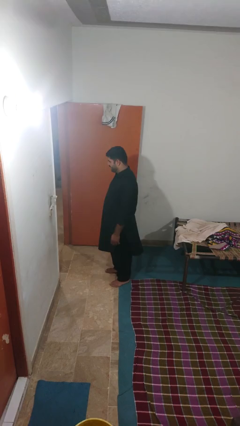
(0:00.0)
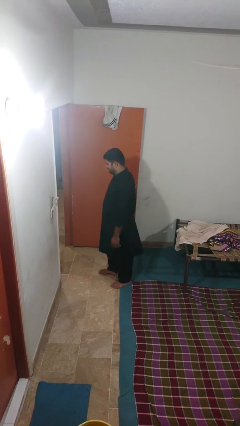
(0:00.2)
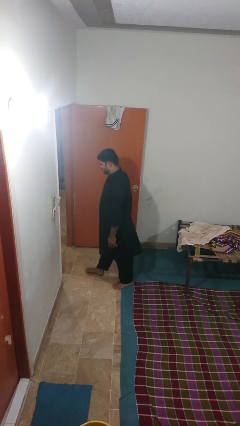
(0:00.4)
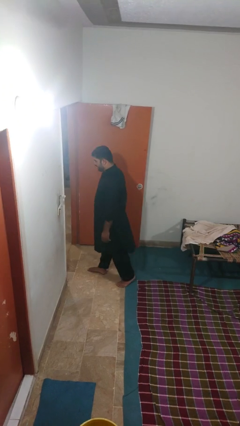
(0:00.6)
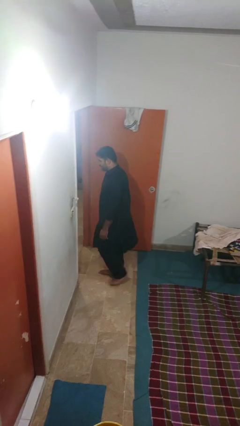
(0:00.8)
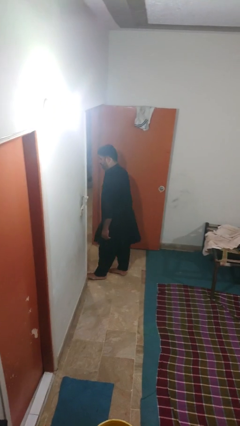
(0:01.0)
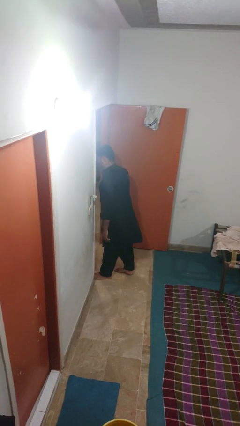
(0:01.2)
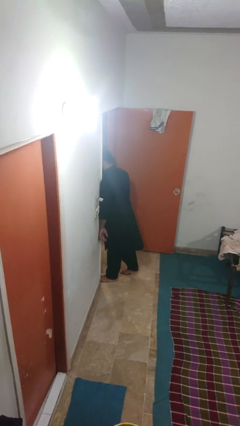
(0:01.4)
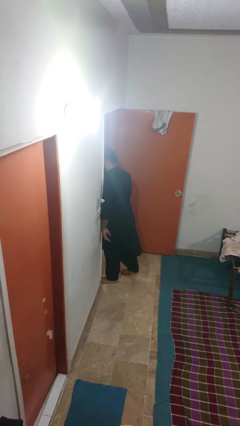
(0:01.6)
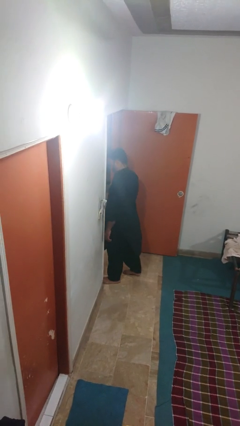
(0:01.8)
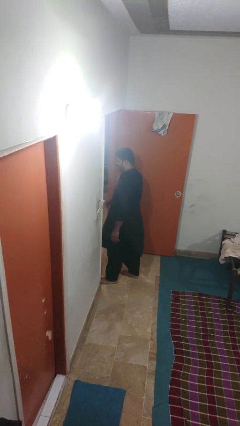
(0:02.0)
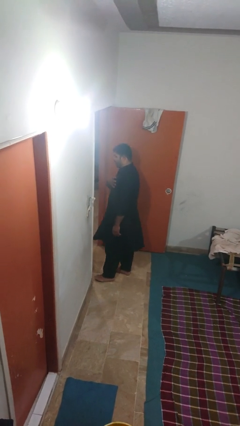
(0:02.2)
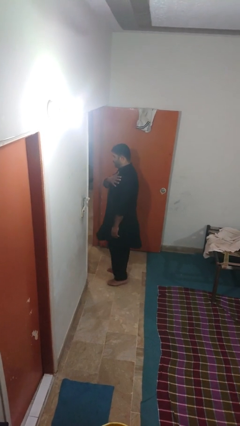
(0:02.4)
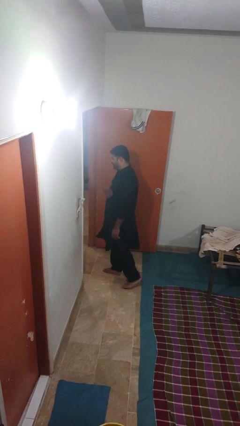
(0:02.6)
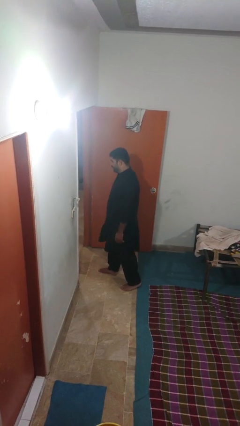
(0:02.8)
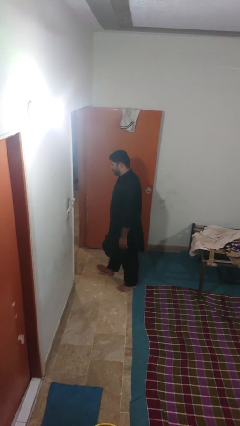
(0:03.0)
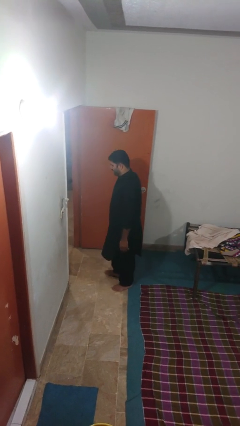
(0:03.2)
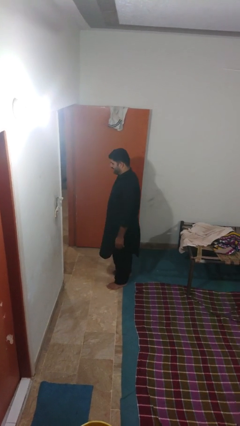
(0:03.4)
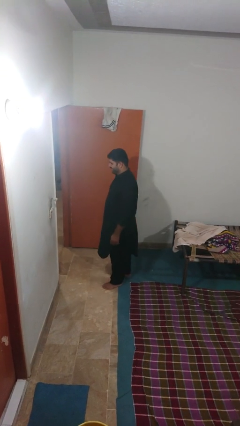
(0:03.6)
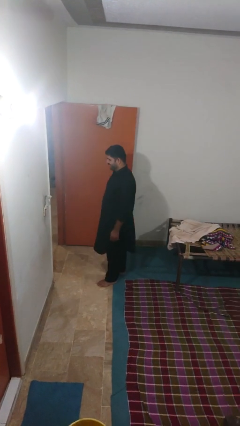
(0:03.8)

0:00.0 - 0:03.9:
person bumps into wall

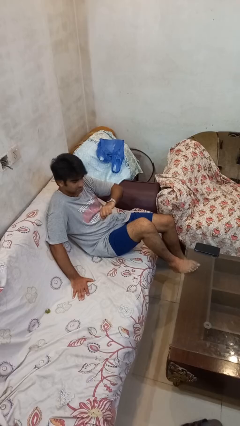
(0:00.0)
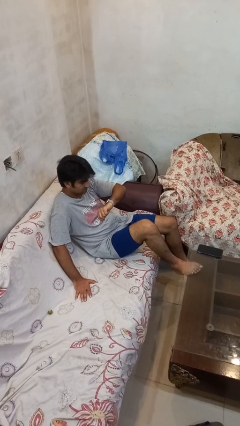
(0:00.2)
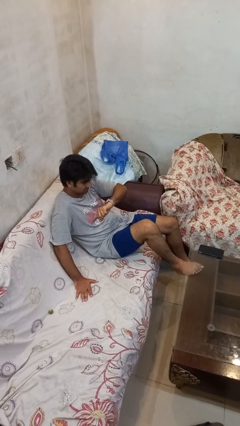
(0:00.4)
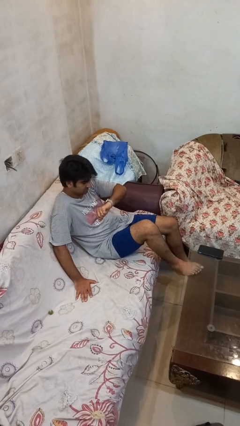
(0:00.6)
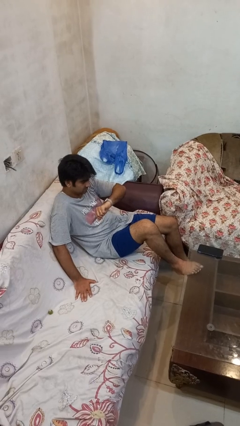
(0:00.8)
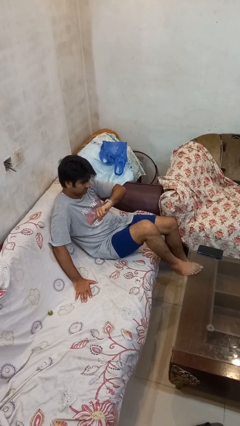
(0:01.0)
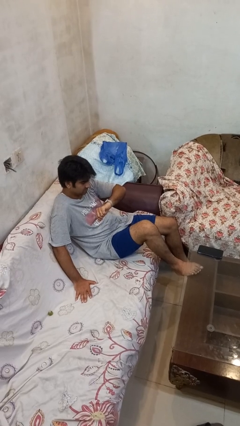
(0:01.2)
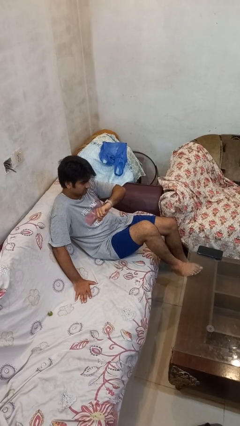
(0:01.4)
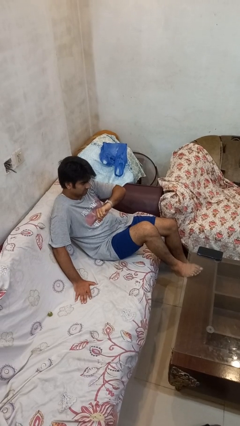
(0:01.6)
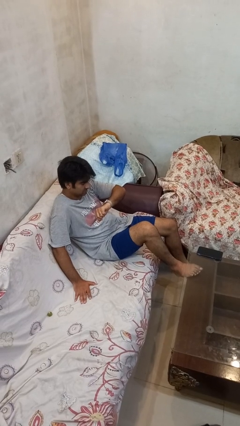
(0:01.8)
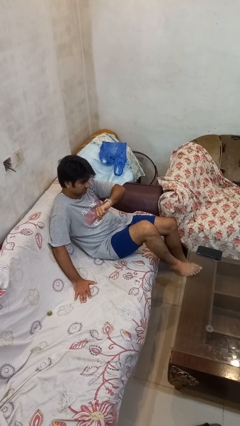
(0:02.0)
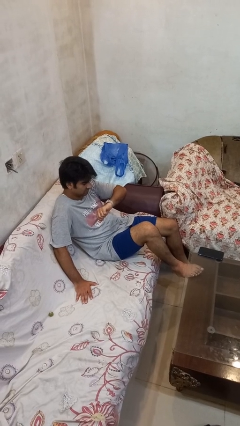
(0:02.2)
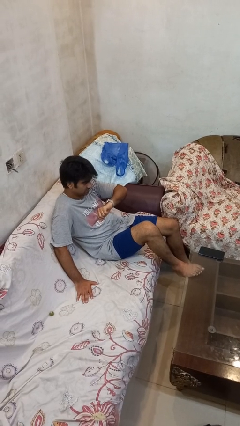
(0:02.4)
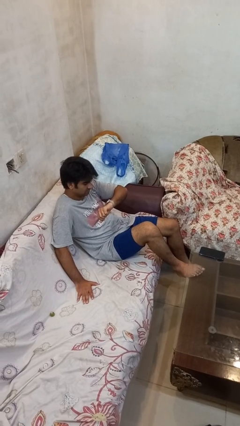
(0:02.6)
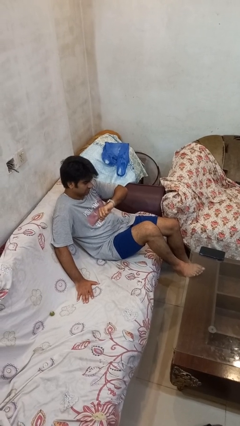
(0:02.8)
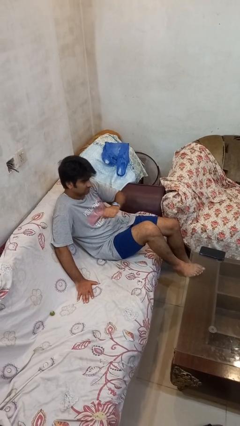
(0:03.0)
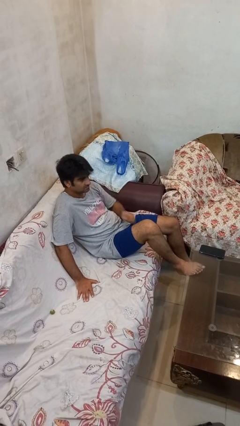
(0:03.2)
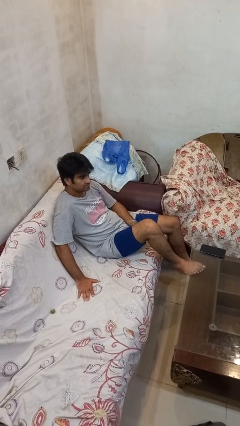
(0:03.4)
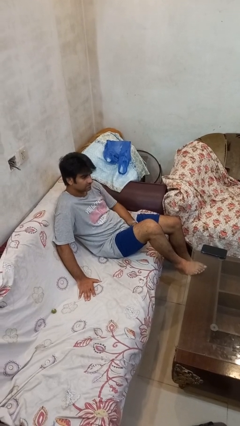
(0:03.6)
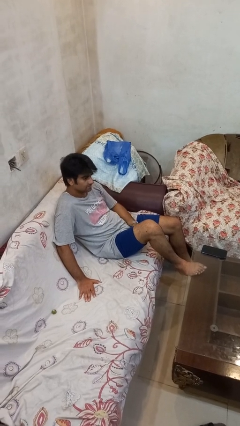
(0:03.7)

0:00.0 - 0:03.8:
person looks at wristwatch

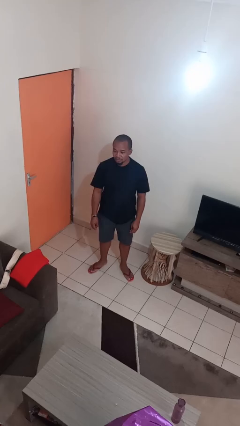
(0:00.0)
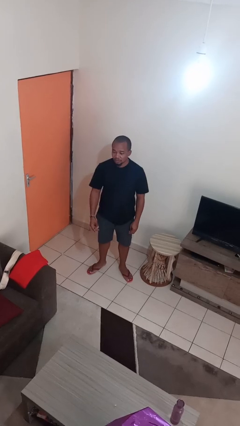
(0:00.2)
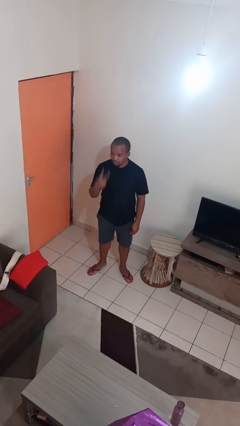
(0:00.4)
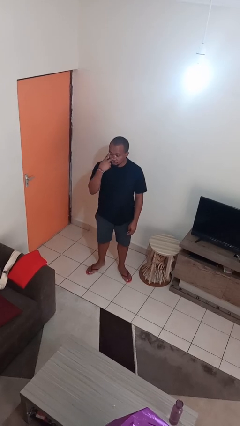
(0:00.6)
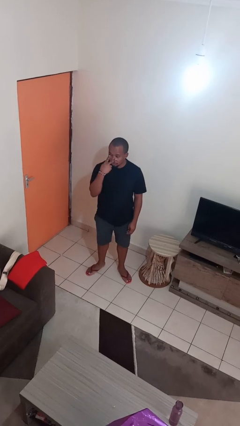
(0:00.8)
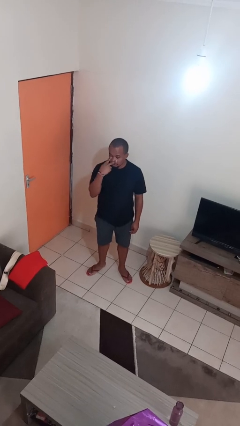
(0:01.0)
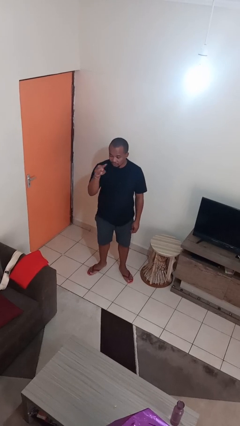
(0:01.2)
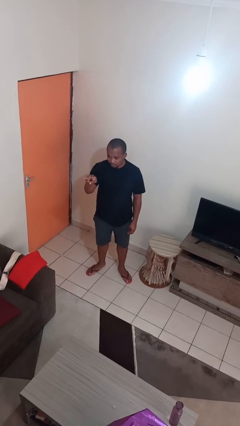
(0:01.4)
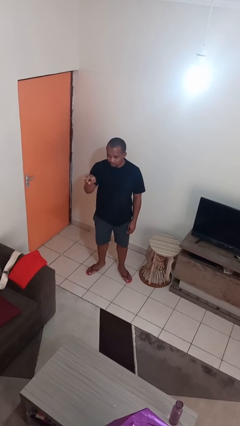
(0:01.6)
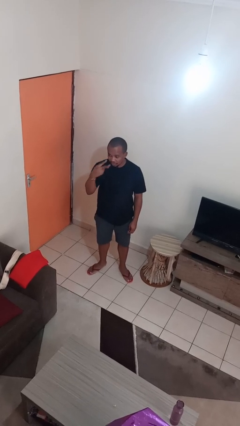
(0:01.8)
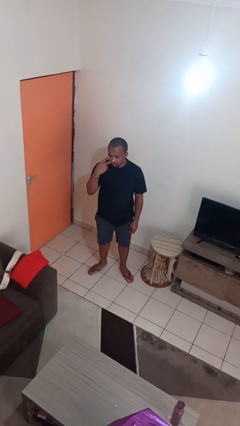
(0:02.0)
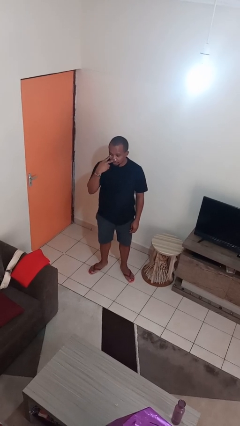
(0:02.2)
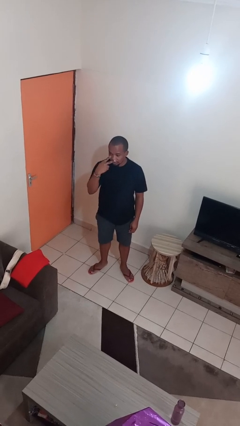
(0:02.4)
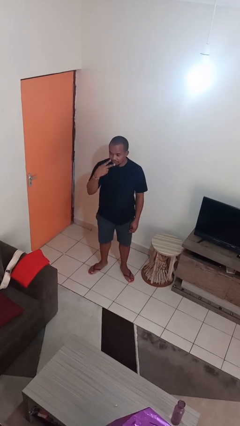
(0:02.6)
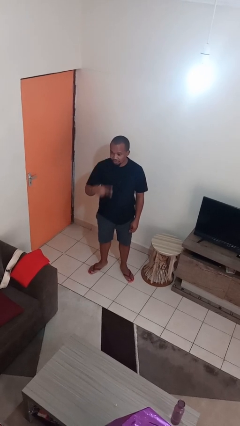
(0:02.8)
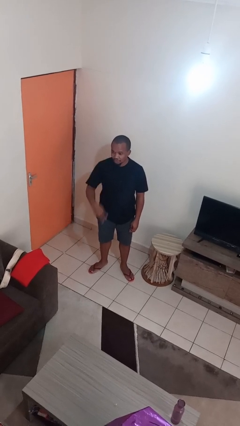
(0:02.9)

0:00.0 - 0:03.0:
person gestures watch closely

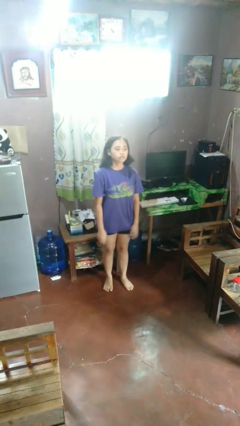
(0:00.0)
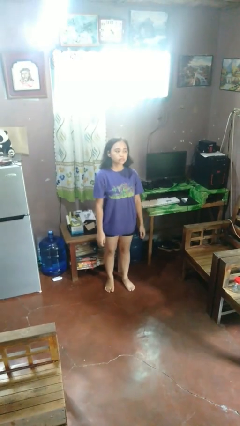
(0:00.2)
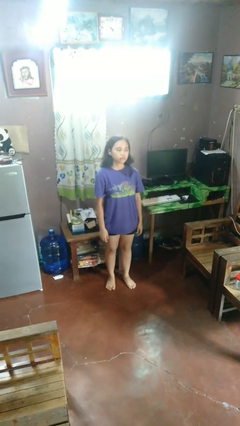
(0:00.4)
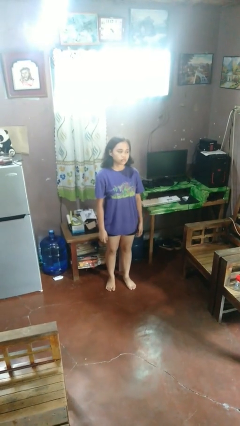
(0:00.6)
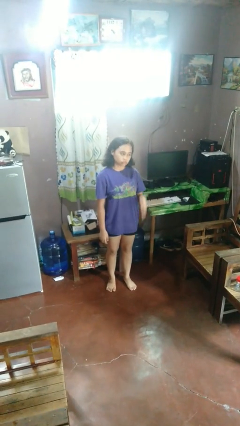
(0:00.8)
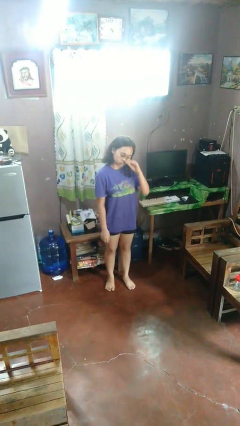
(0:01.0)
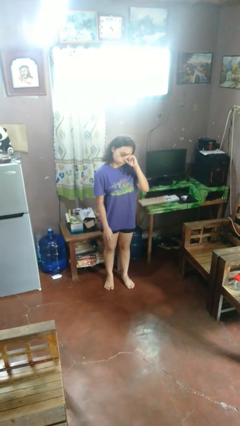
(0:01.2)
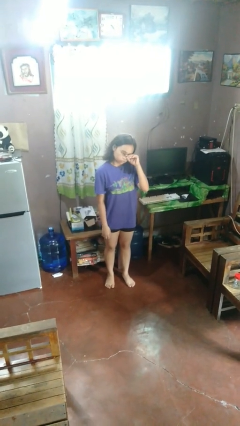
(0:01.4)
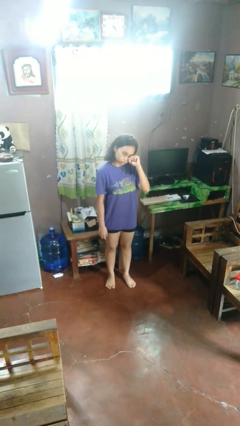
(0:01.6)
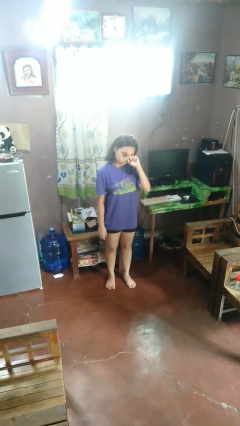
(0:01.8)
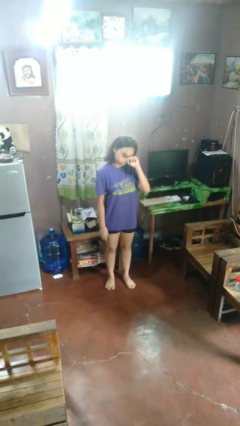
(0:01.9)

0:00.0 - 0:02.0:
person rubs eyes

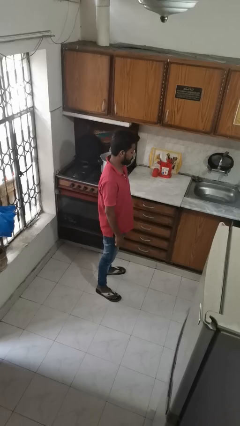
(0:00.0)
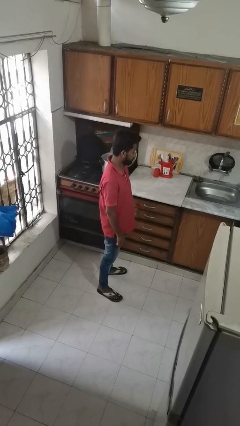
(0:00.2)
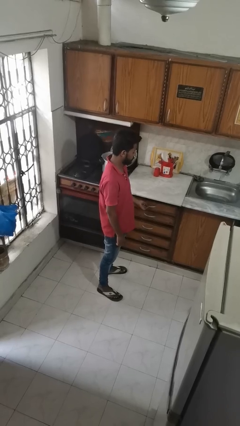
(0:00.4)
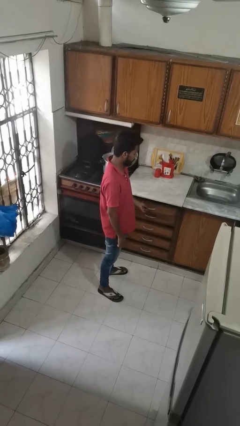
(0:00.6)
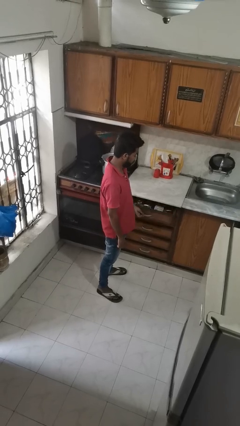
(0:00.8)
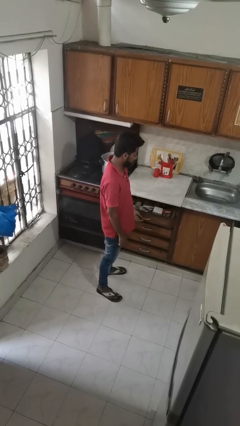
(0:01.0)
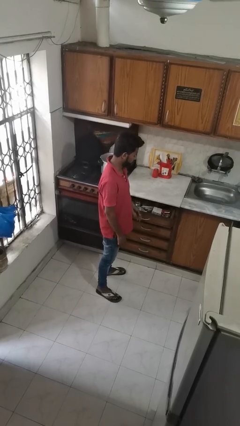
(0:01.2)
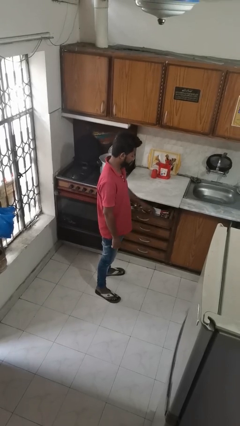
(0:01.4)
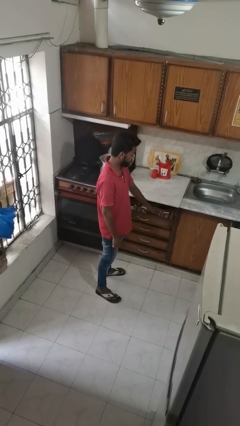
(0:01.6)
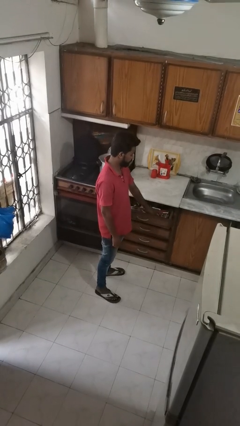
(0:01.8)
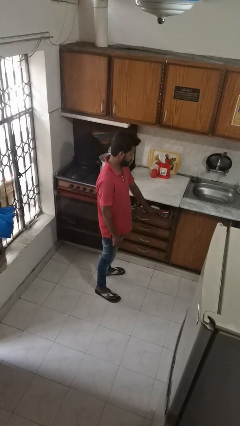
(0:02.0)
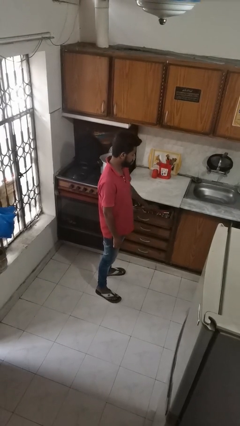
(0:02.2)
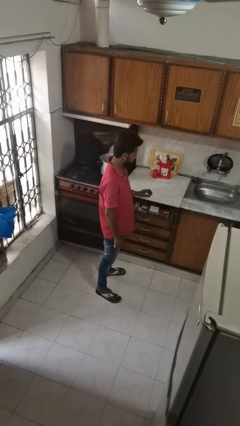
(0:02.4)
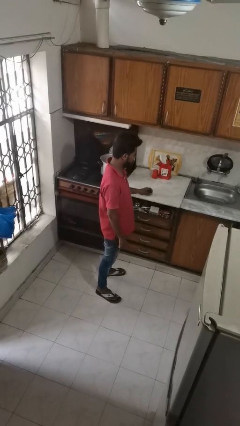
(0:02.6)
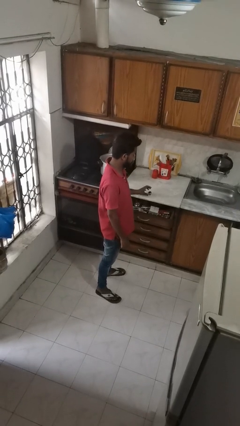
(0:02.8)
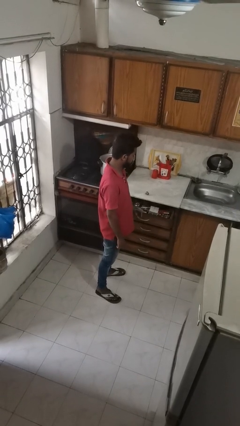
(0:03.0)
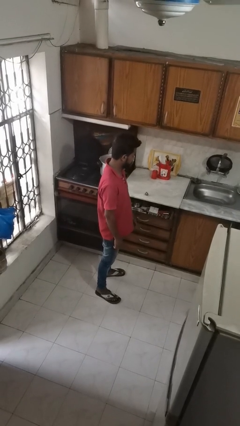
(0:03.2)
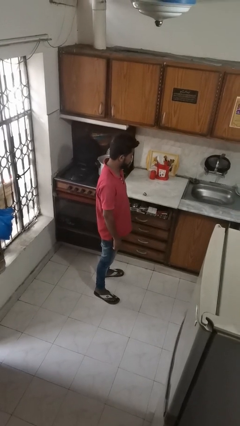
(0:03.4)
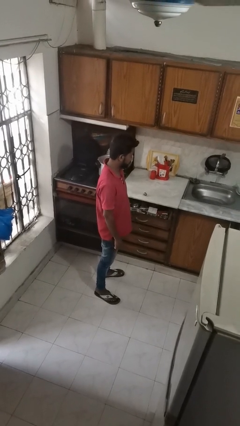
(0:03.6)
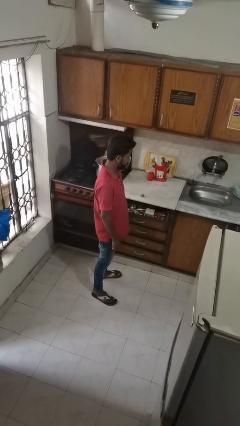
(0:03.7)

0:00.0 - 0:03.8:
person takes object from kitchen drawer

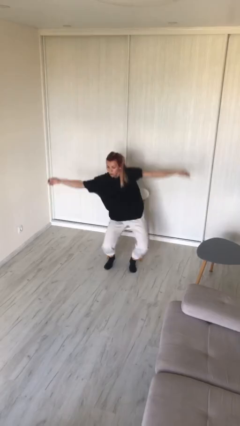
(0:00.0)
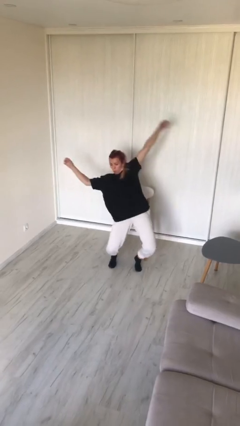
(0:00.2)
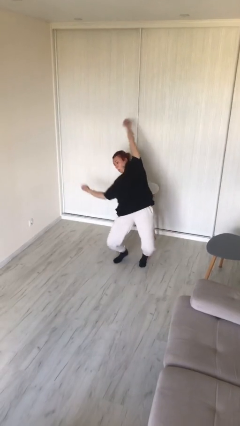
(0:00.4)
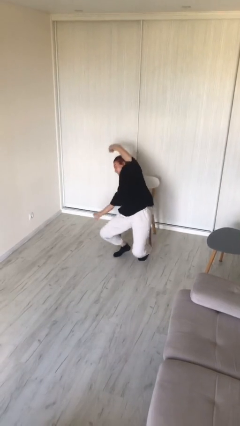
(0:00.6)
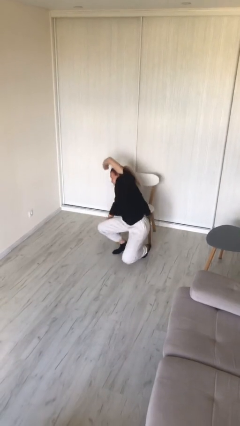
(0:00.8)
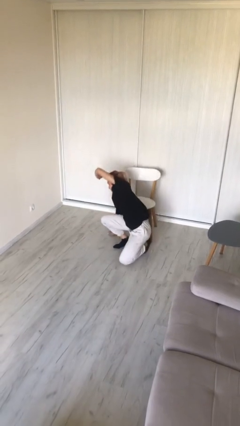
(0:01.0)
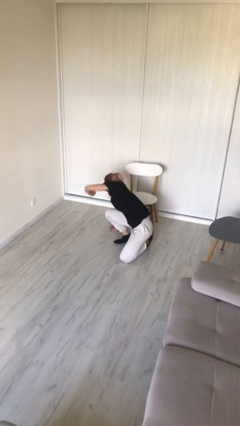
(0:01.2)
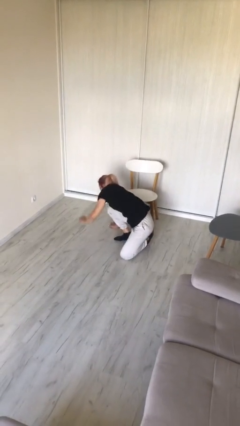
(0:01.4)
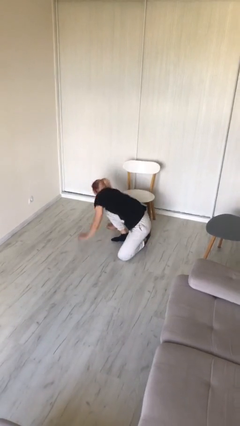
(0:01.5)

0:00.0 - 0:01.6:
person falls from chair
